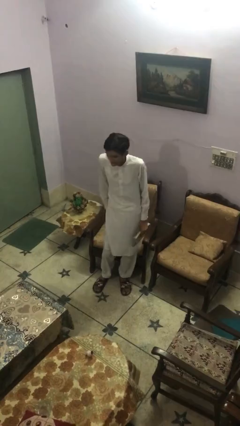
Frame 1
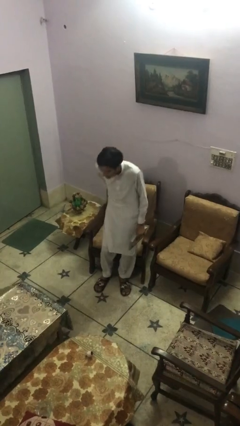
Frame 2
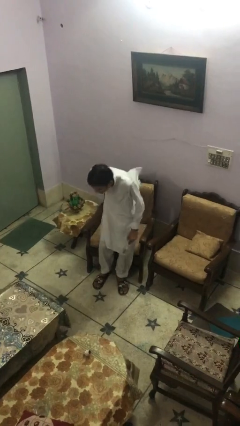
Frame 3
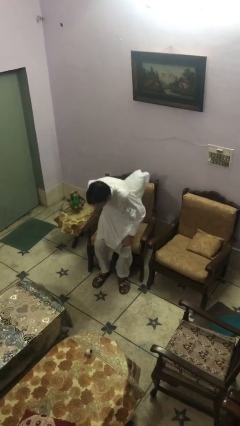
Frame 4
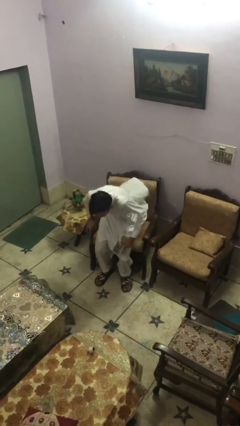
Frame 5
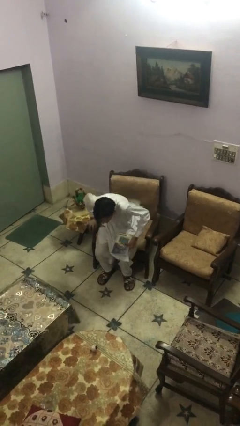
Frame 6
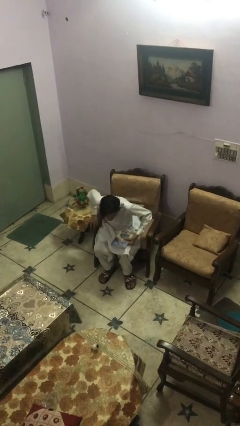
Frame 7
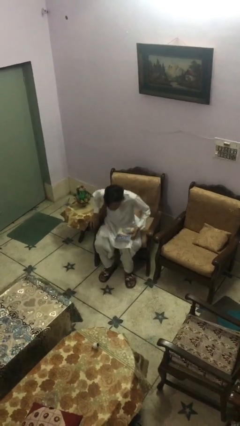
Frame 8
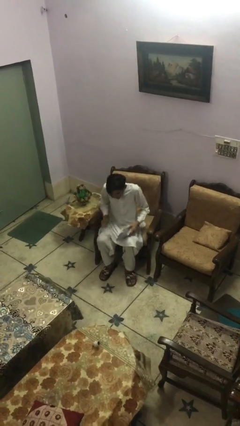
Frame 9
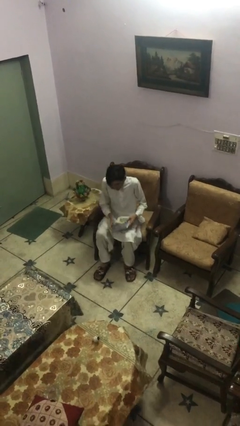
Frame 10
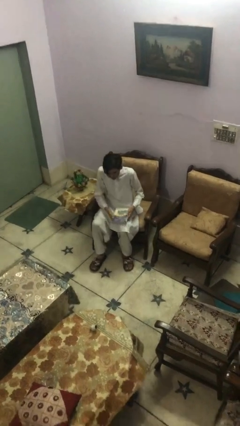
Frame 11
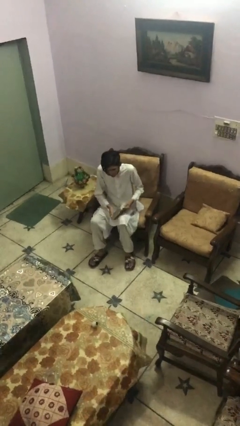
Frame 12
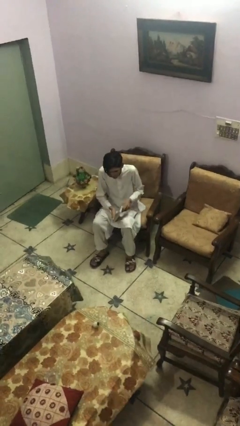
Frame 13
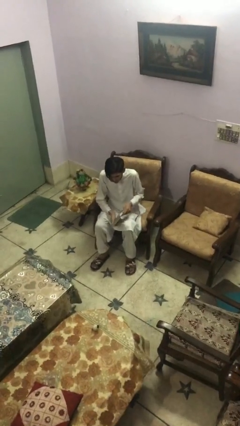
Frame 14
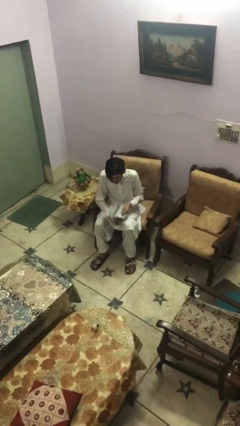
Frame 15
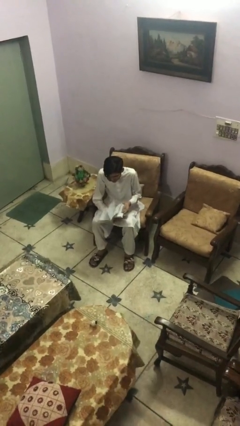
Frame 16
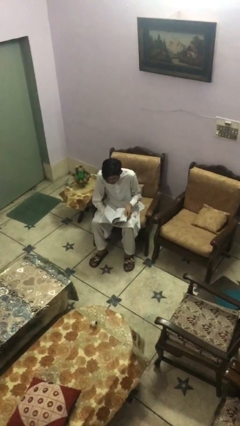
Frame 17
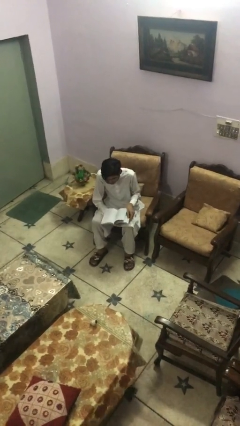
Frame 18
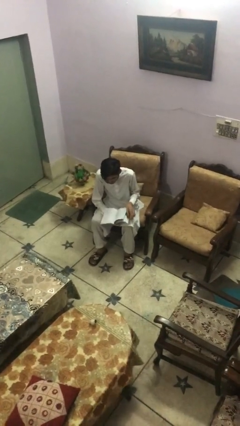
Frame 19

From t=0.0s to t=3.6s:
person sits down

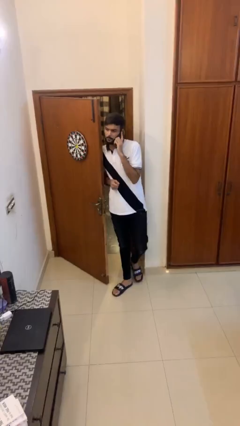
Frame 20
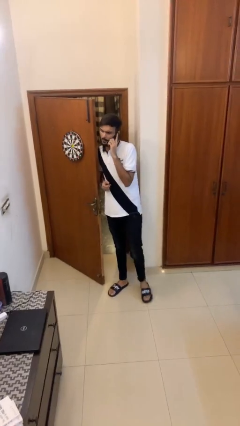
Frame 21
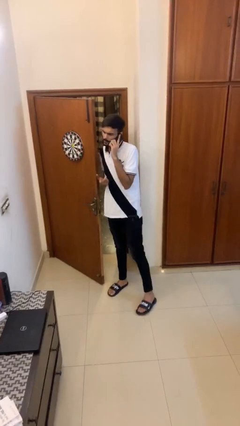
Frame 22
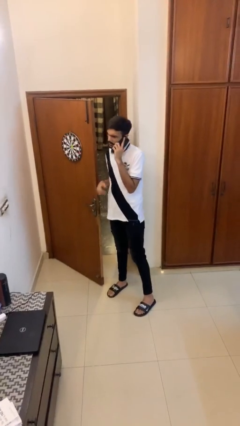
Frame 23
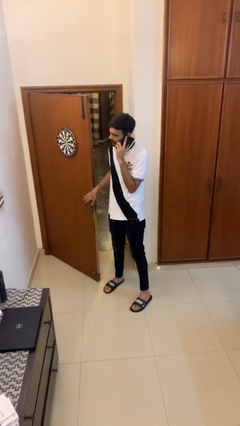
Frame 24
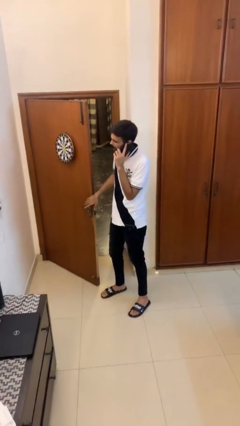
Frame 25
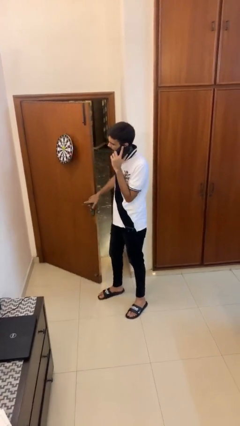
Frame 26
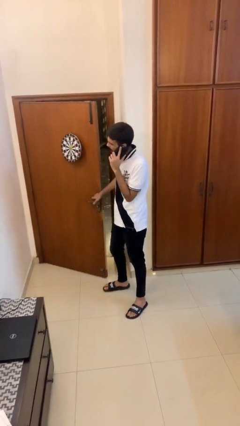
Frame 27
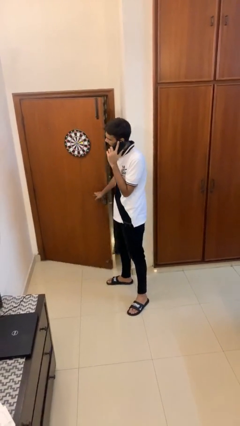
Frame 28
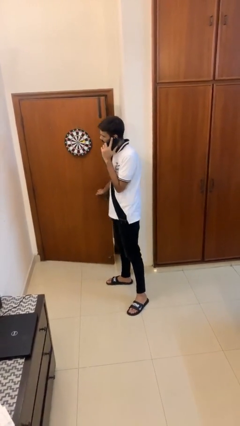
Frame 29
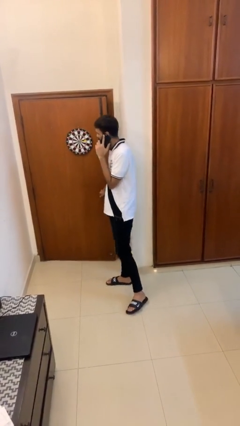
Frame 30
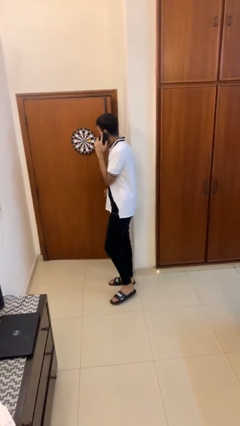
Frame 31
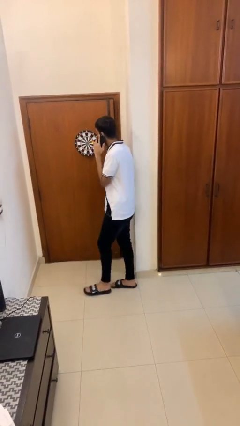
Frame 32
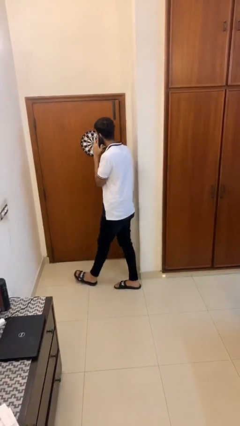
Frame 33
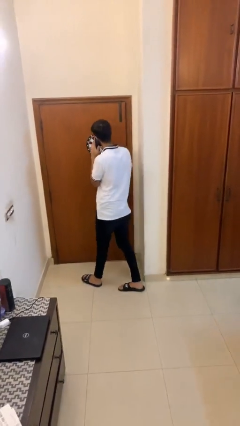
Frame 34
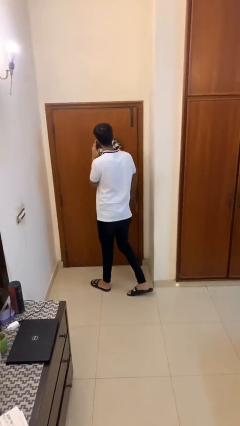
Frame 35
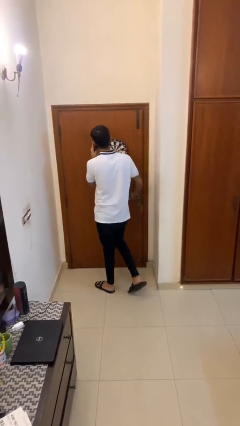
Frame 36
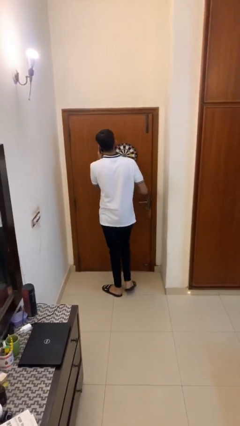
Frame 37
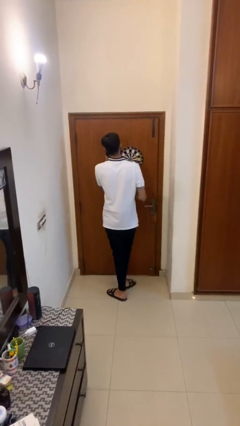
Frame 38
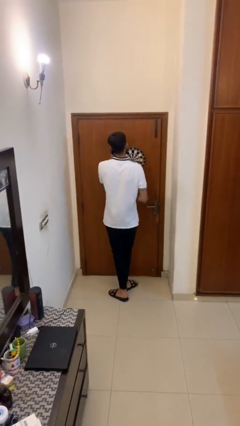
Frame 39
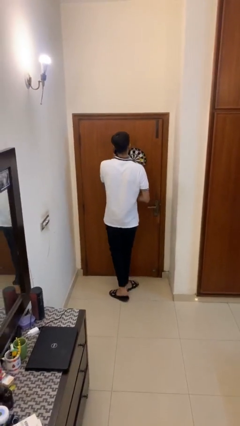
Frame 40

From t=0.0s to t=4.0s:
person closes facility door

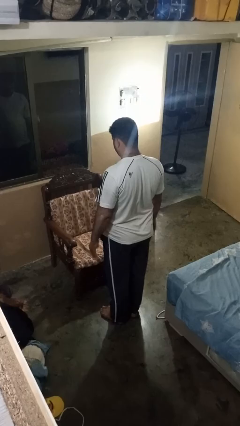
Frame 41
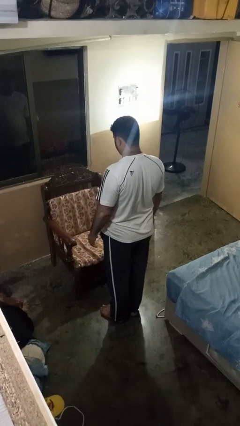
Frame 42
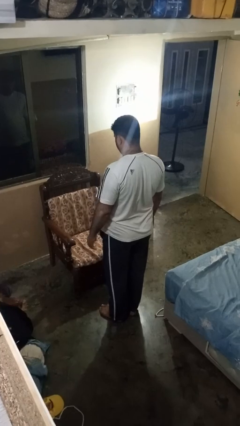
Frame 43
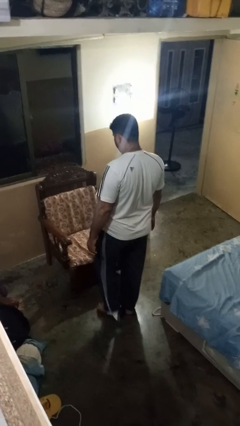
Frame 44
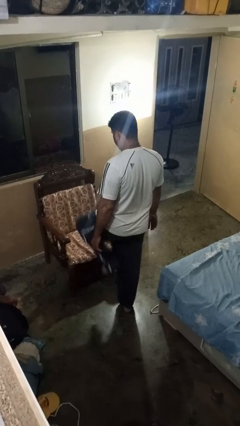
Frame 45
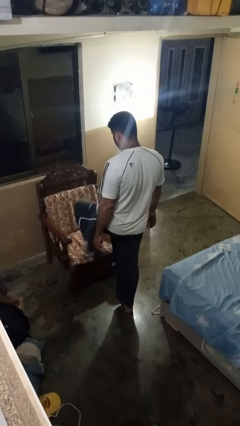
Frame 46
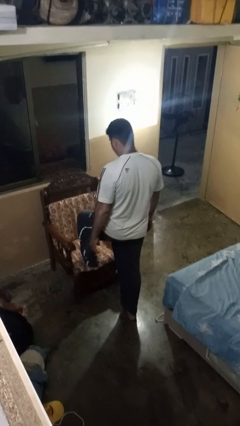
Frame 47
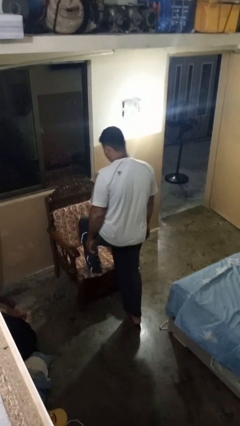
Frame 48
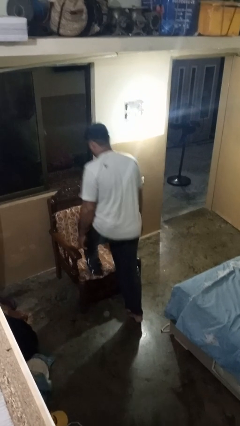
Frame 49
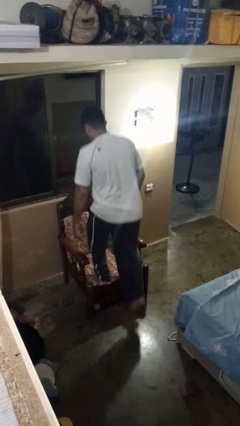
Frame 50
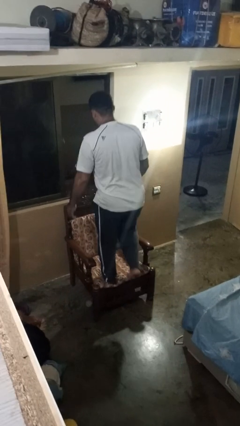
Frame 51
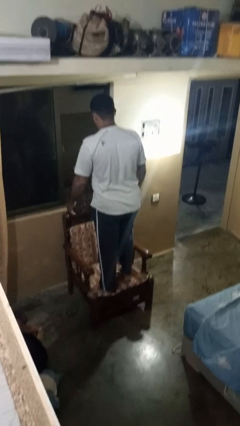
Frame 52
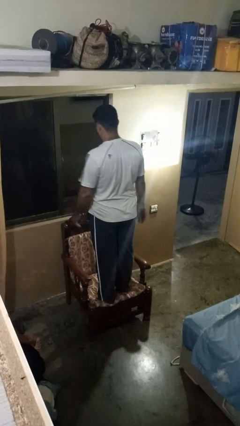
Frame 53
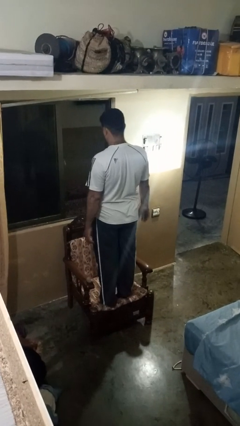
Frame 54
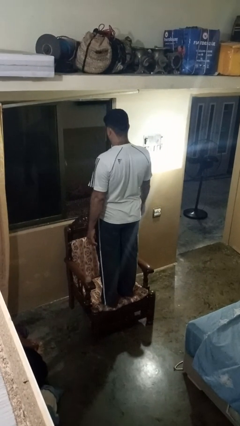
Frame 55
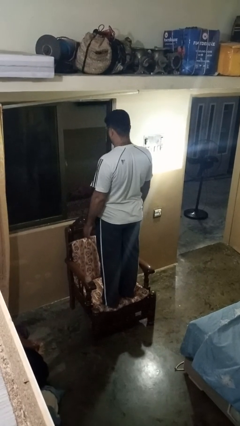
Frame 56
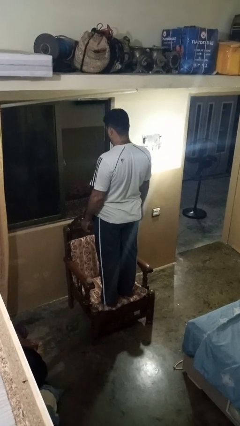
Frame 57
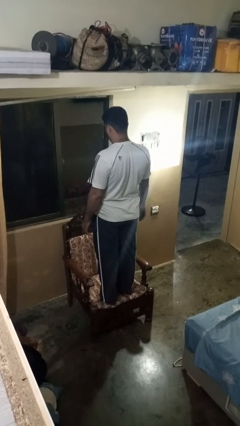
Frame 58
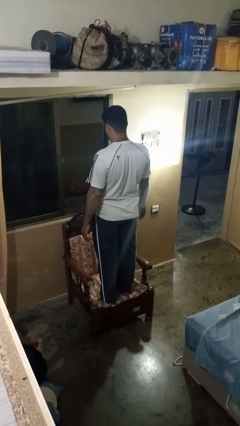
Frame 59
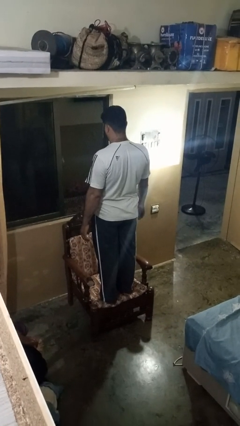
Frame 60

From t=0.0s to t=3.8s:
person climbs on chair

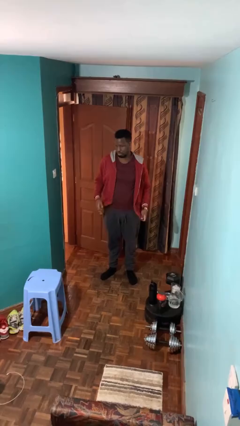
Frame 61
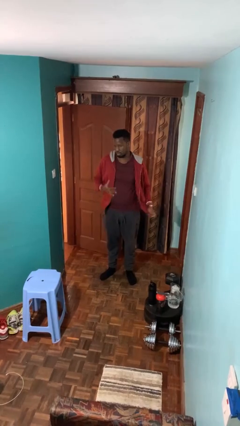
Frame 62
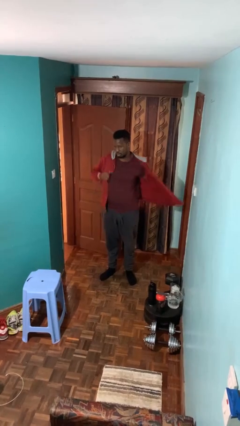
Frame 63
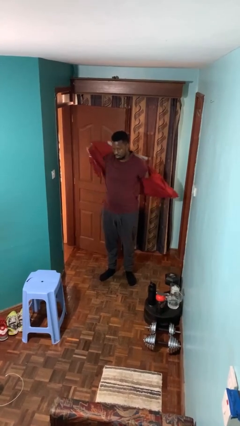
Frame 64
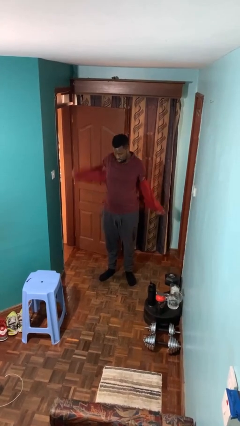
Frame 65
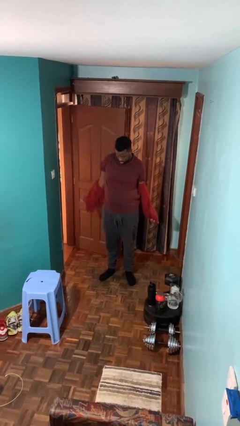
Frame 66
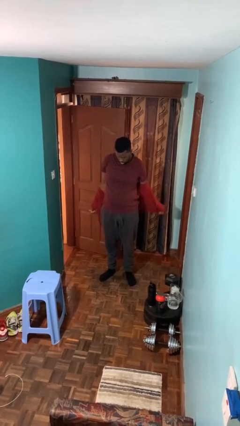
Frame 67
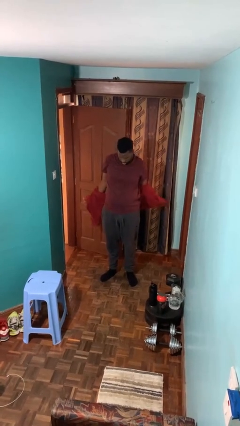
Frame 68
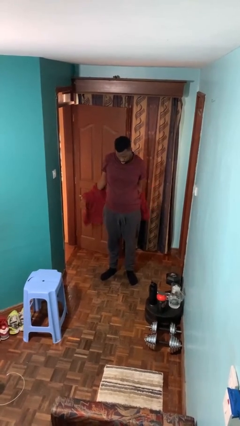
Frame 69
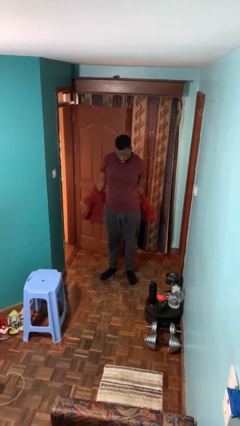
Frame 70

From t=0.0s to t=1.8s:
person takes off jacket

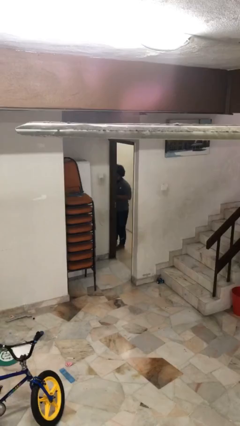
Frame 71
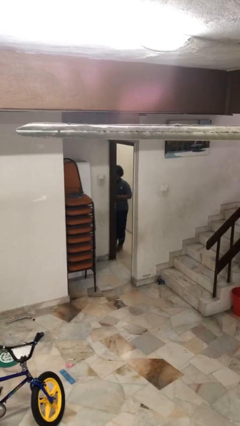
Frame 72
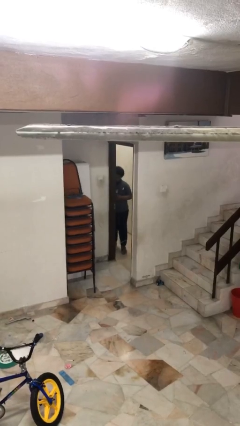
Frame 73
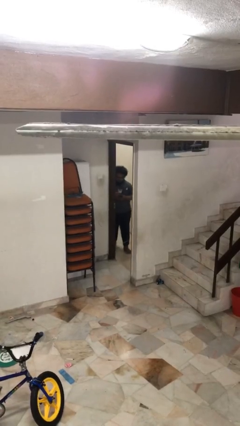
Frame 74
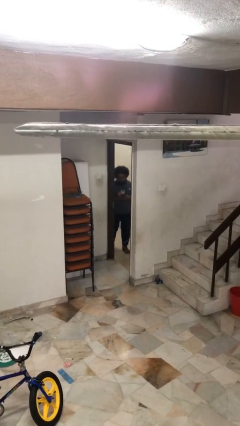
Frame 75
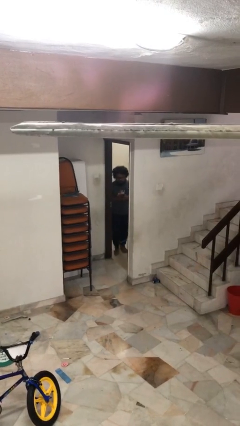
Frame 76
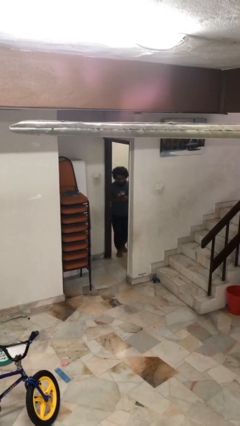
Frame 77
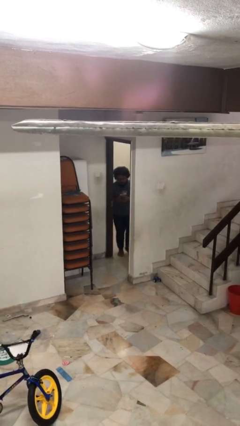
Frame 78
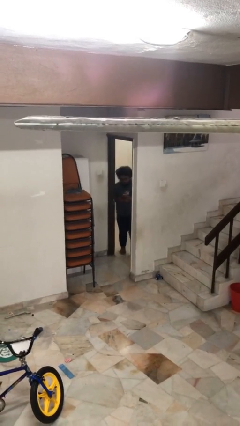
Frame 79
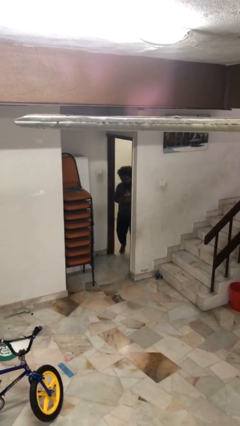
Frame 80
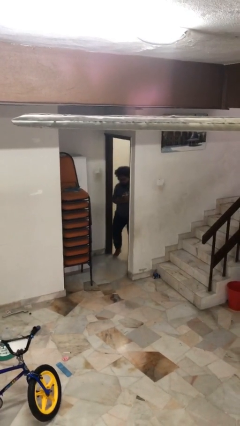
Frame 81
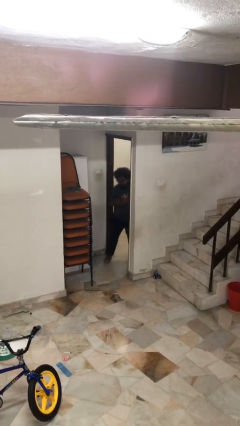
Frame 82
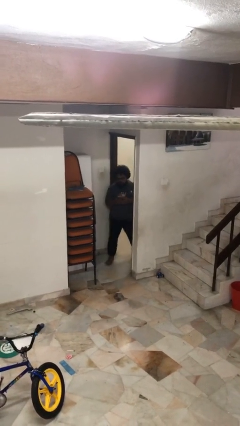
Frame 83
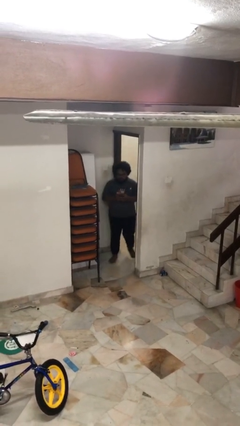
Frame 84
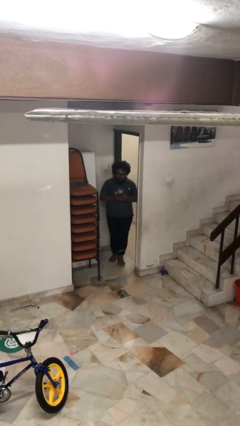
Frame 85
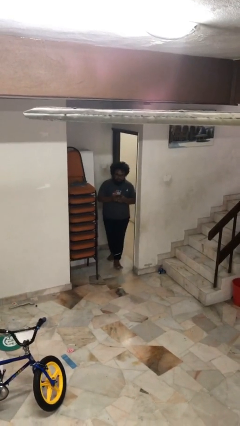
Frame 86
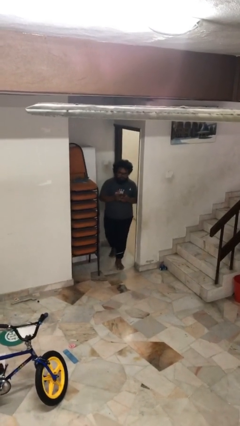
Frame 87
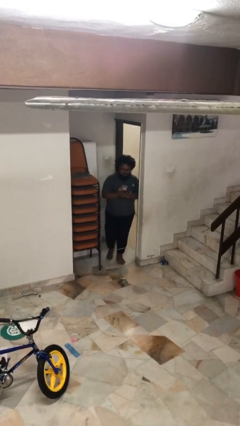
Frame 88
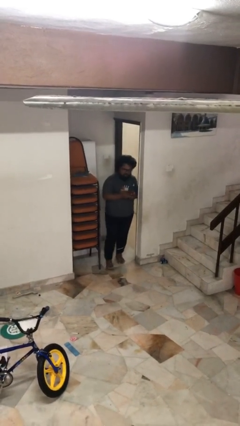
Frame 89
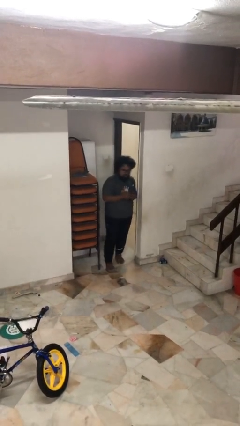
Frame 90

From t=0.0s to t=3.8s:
person enters scene through structure

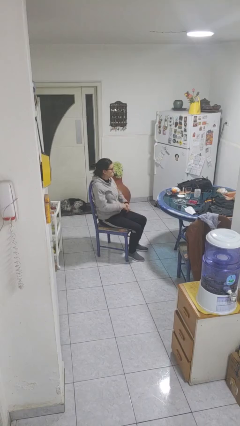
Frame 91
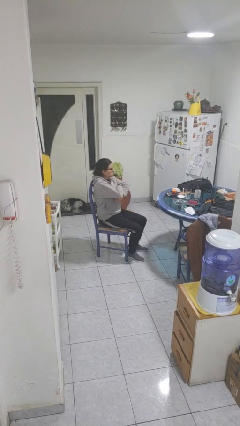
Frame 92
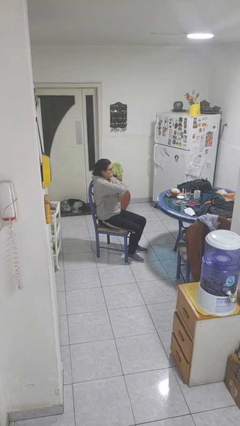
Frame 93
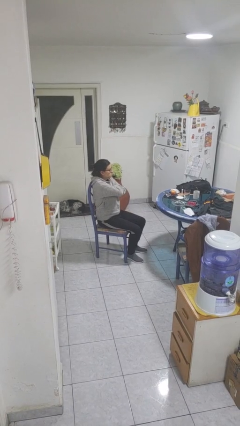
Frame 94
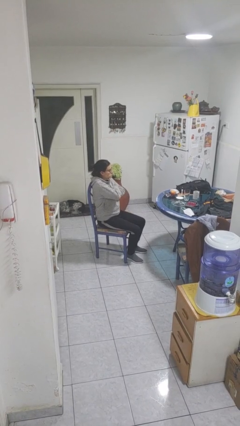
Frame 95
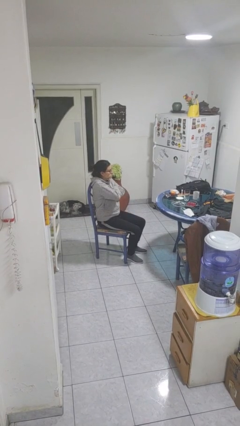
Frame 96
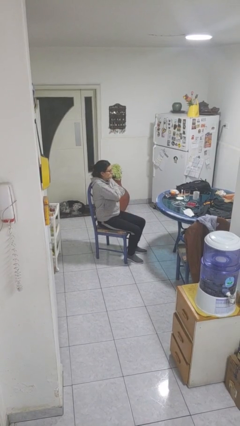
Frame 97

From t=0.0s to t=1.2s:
person crosses arms
